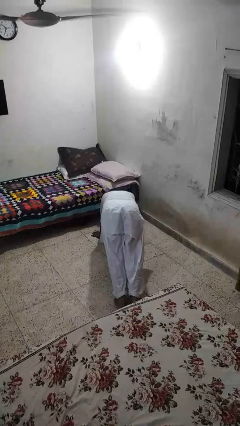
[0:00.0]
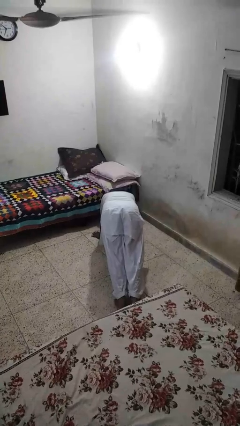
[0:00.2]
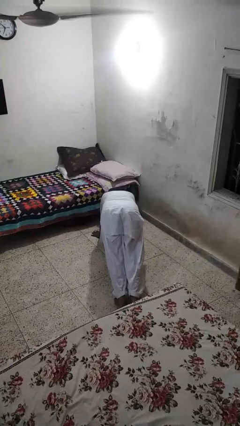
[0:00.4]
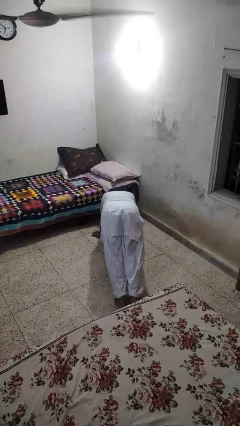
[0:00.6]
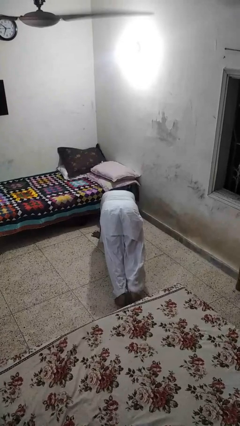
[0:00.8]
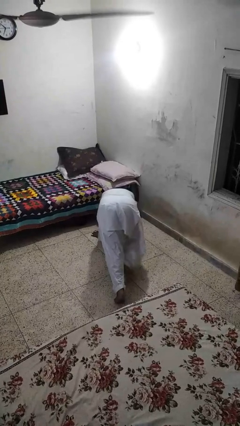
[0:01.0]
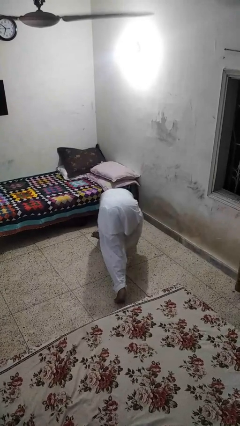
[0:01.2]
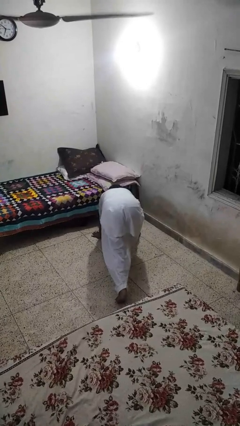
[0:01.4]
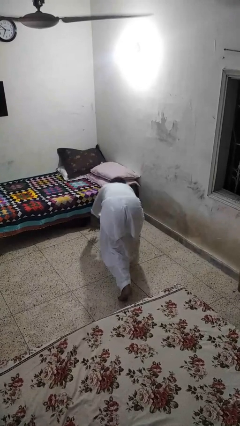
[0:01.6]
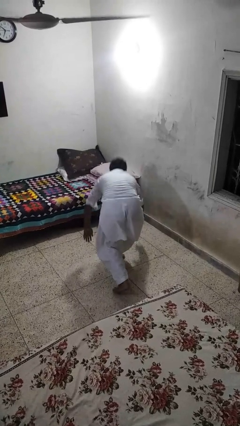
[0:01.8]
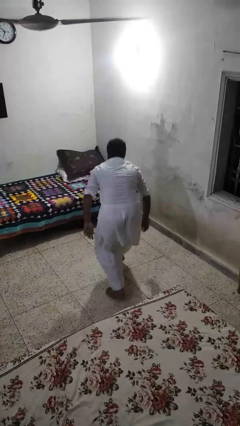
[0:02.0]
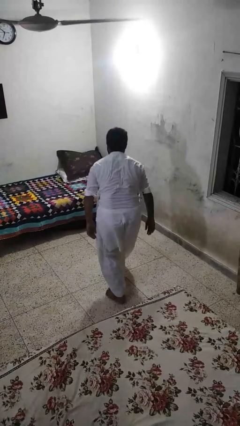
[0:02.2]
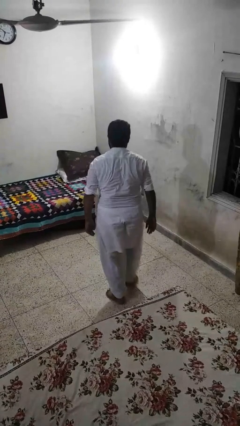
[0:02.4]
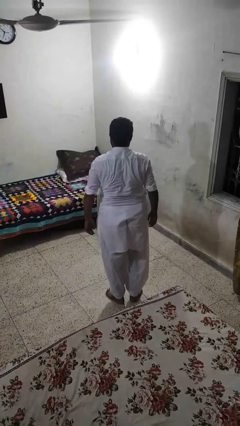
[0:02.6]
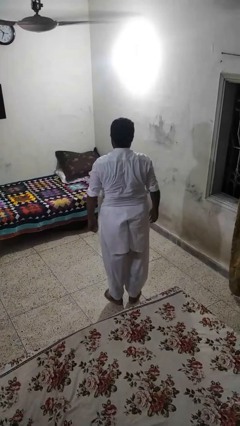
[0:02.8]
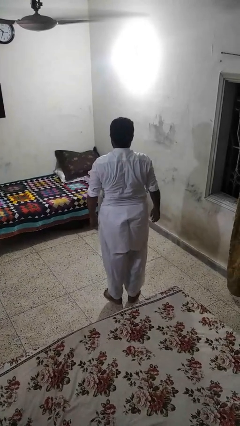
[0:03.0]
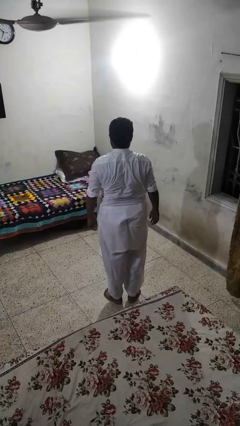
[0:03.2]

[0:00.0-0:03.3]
person stands up from floor

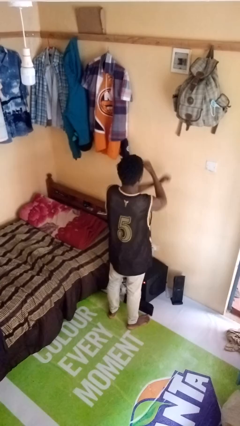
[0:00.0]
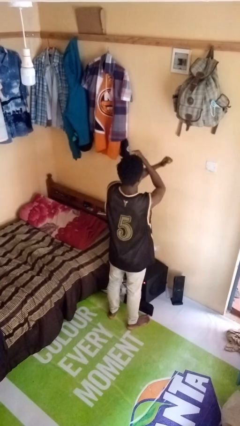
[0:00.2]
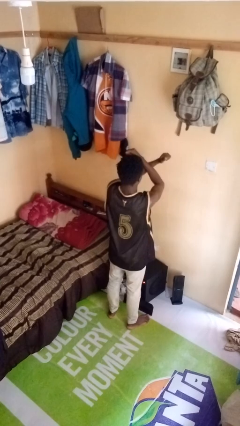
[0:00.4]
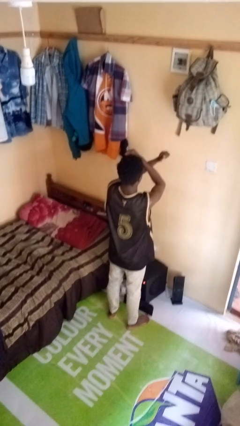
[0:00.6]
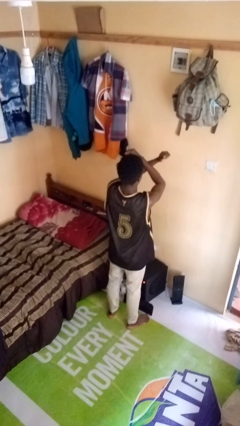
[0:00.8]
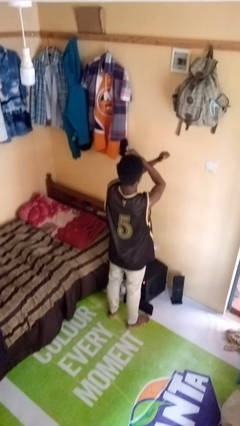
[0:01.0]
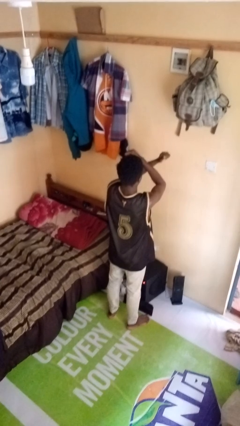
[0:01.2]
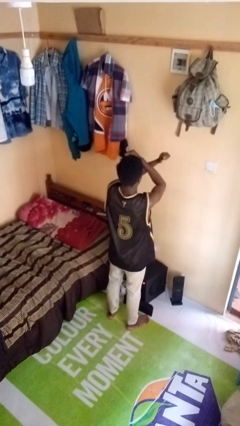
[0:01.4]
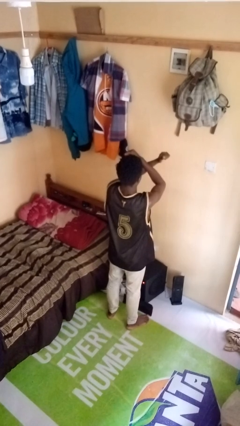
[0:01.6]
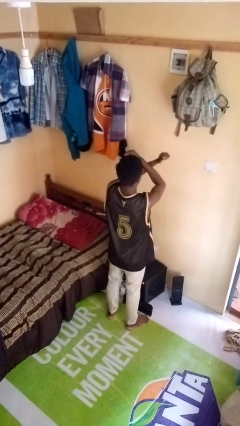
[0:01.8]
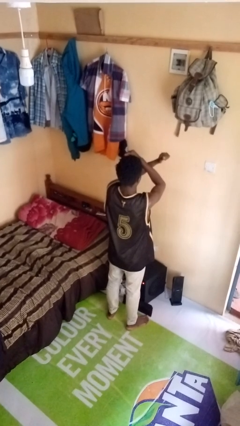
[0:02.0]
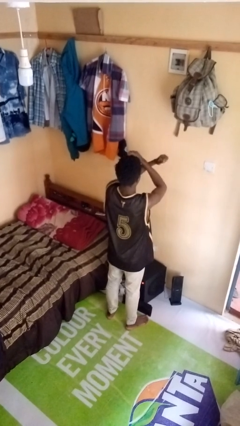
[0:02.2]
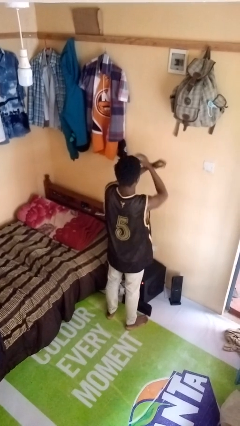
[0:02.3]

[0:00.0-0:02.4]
person gestures arms x

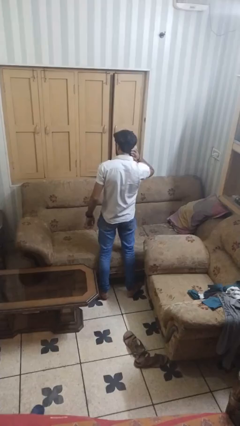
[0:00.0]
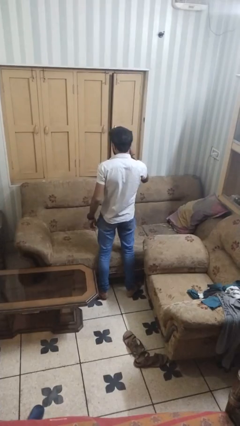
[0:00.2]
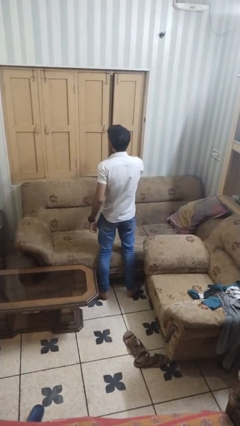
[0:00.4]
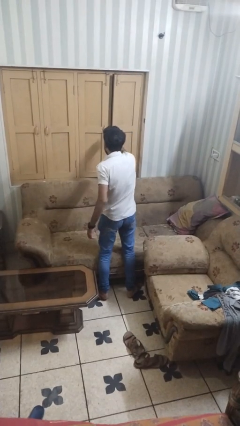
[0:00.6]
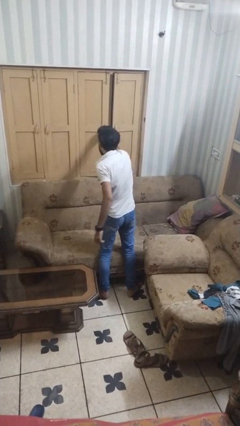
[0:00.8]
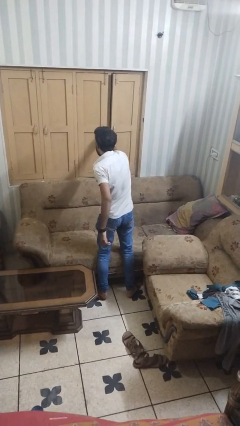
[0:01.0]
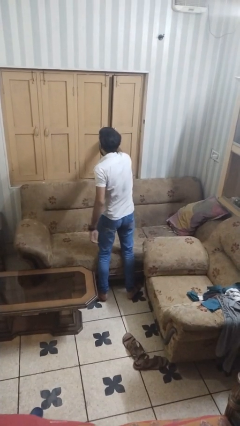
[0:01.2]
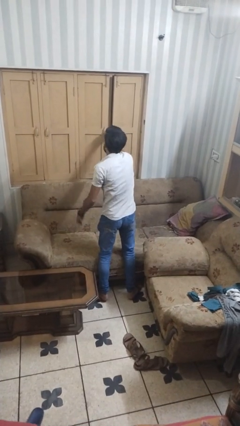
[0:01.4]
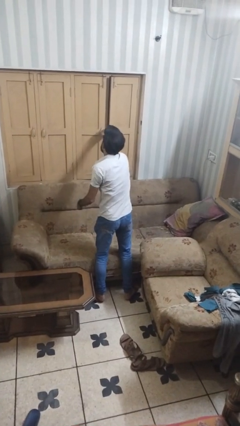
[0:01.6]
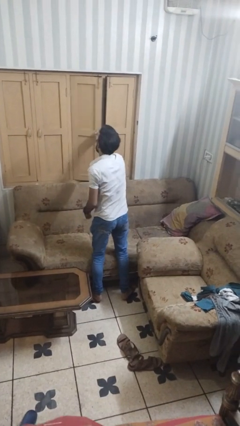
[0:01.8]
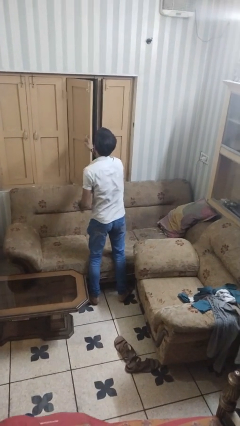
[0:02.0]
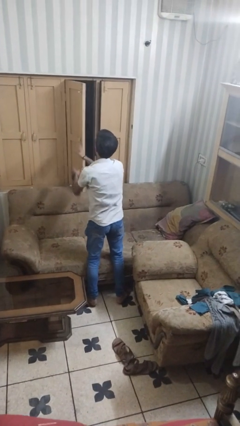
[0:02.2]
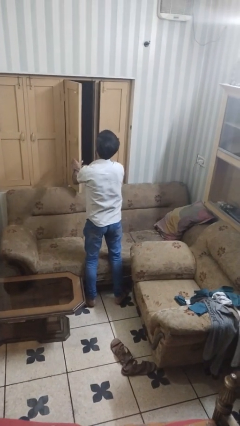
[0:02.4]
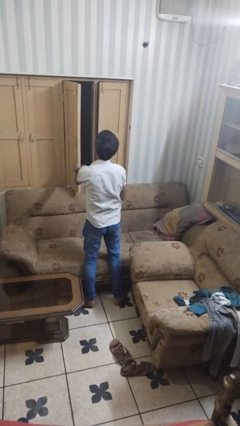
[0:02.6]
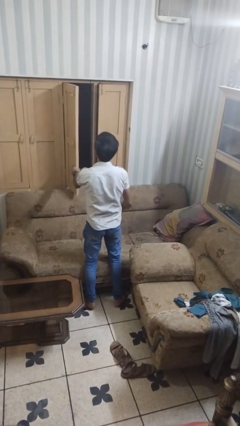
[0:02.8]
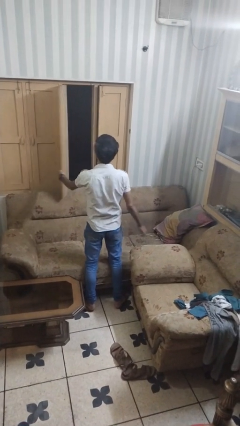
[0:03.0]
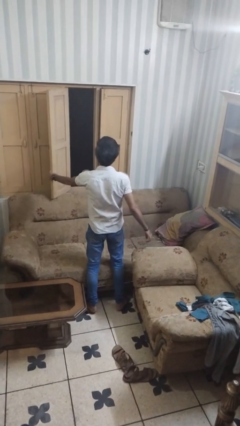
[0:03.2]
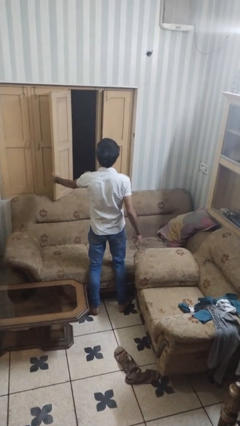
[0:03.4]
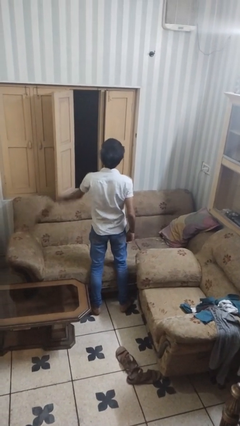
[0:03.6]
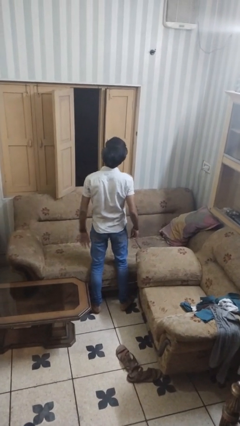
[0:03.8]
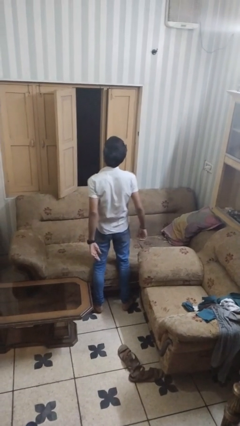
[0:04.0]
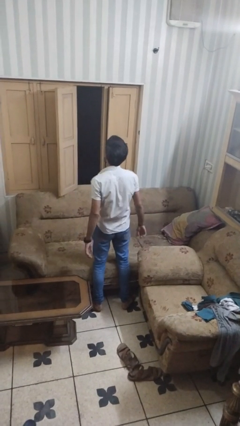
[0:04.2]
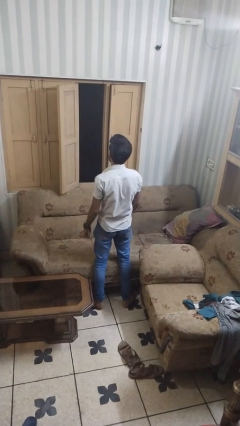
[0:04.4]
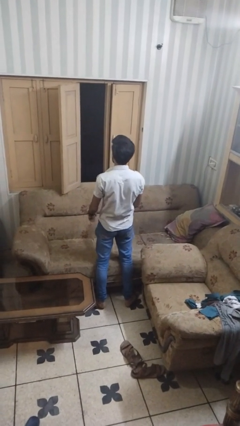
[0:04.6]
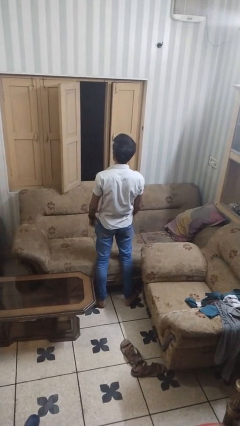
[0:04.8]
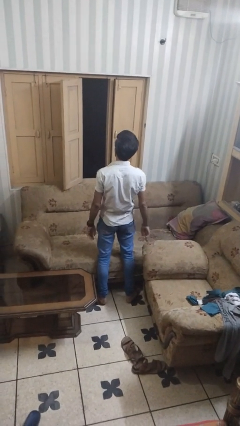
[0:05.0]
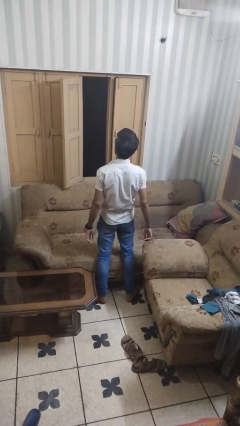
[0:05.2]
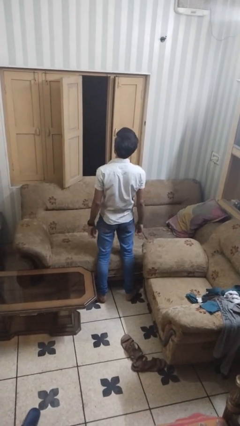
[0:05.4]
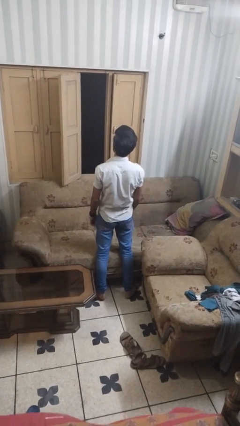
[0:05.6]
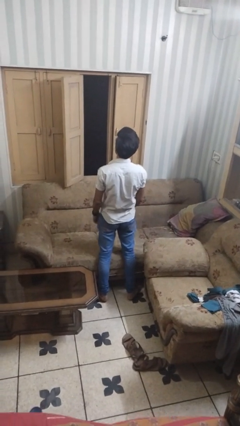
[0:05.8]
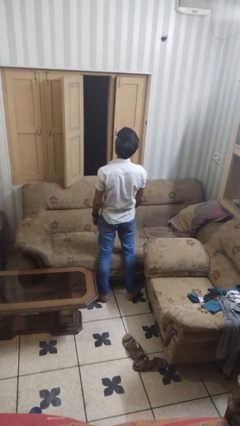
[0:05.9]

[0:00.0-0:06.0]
person opens home window

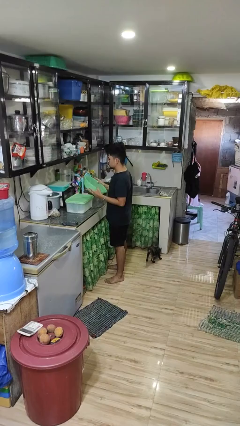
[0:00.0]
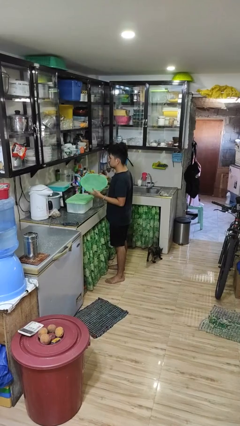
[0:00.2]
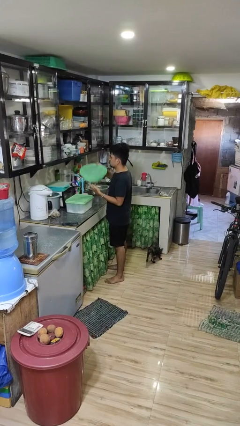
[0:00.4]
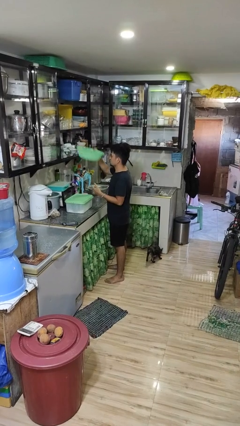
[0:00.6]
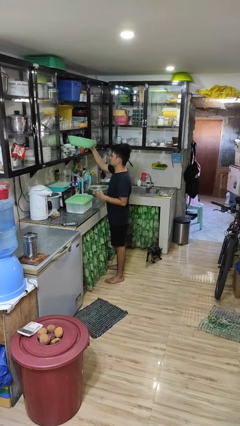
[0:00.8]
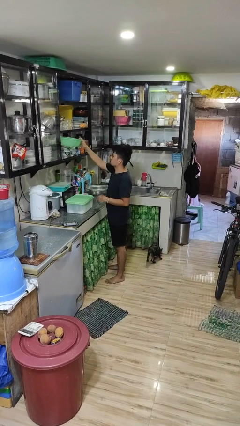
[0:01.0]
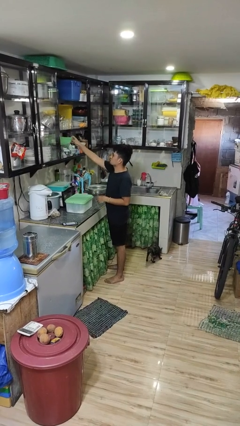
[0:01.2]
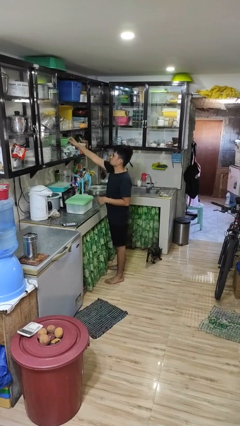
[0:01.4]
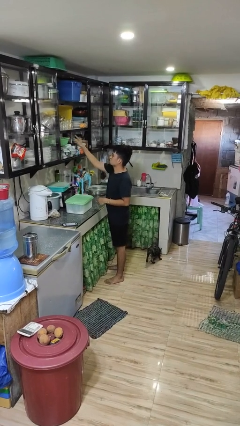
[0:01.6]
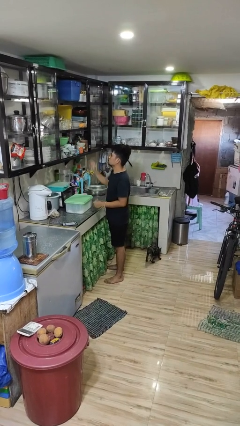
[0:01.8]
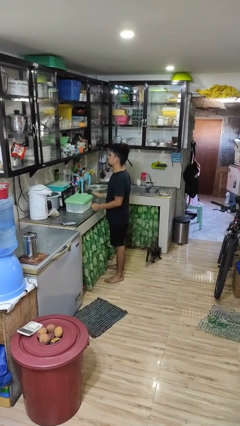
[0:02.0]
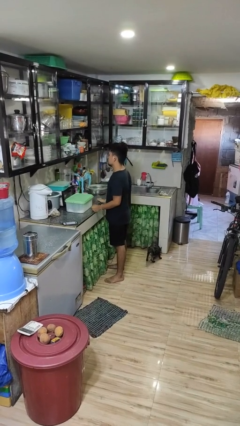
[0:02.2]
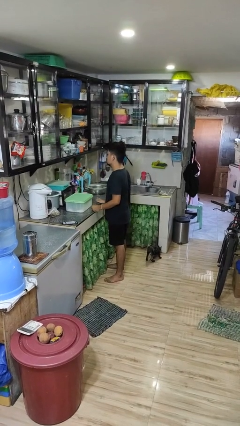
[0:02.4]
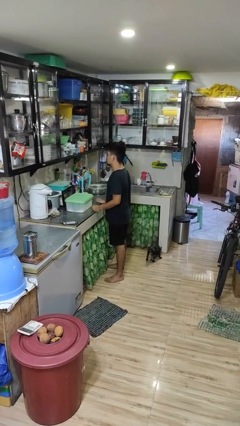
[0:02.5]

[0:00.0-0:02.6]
person puts down object into cabinet

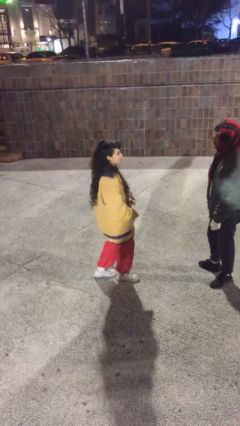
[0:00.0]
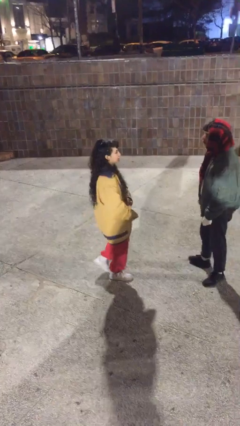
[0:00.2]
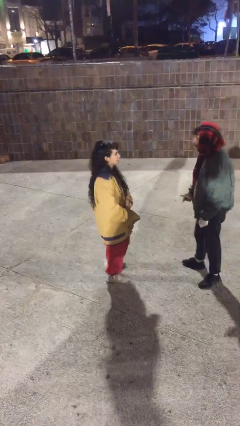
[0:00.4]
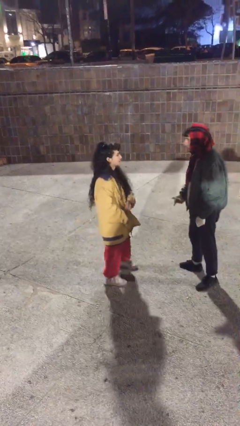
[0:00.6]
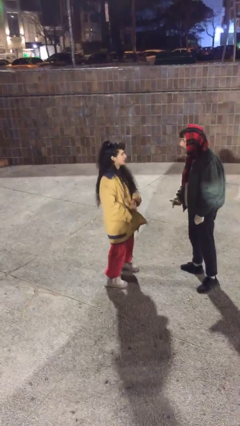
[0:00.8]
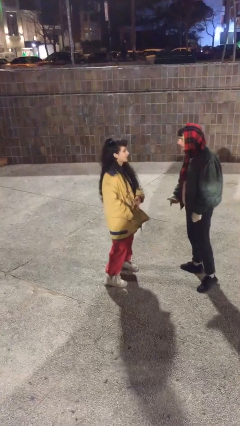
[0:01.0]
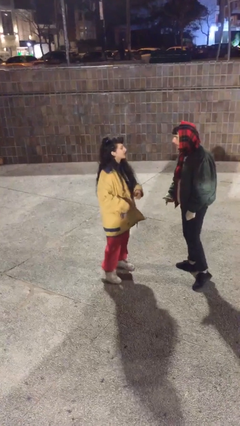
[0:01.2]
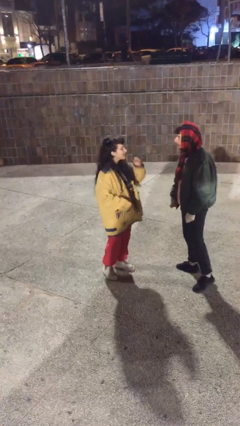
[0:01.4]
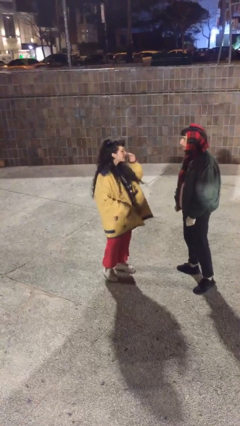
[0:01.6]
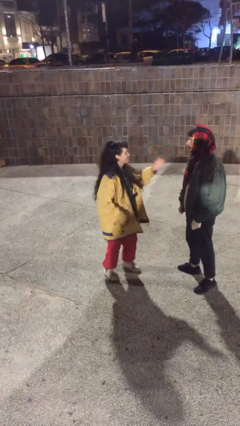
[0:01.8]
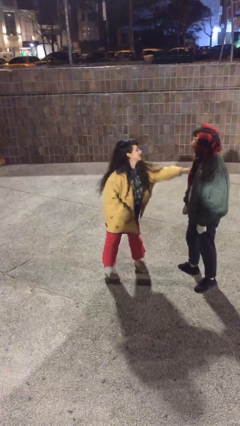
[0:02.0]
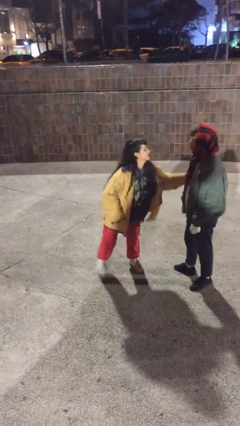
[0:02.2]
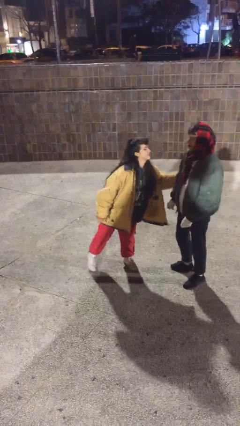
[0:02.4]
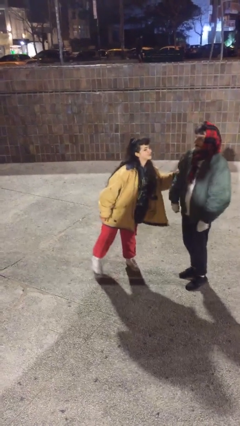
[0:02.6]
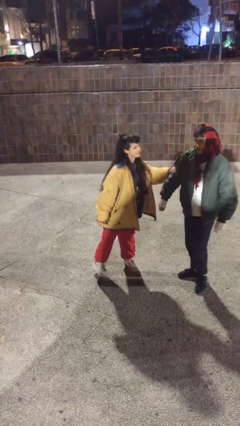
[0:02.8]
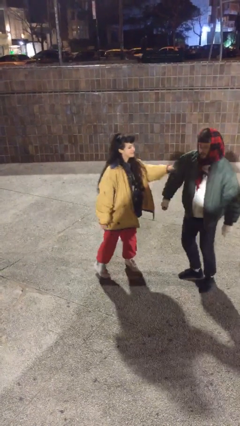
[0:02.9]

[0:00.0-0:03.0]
person grabs person by bicep

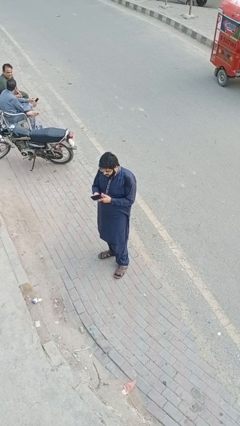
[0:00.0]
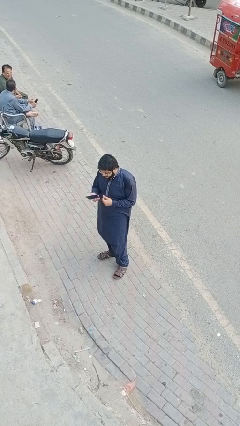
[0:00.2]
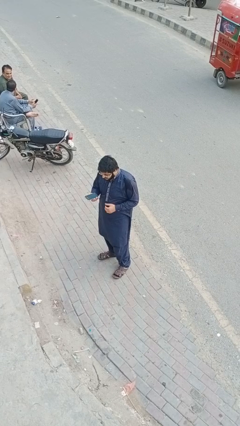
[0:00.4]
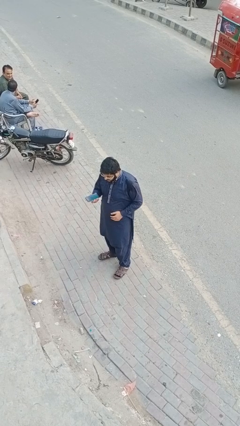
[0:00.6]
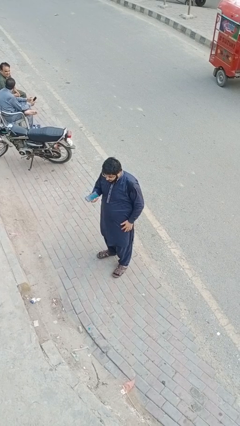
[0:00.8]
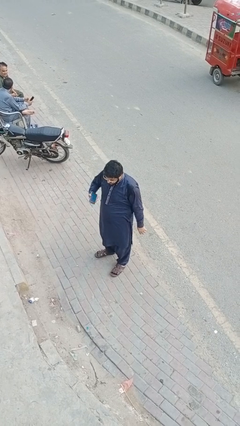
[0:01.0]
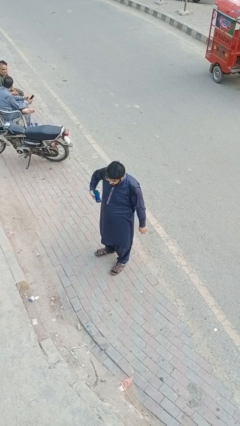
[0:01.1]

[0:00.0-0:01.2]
person puts phone into pocket
